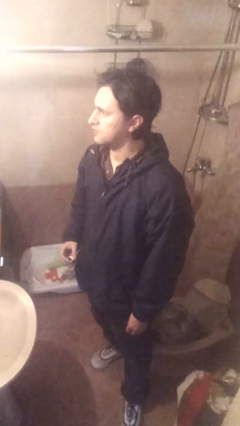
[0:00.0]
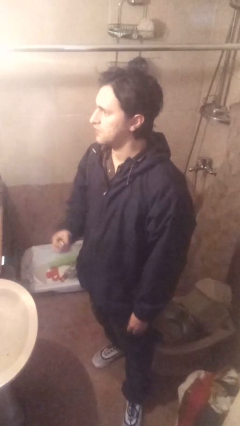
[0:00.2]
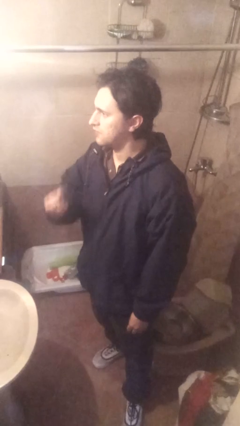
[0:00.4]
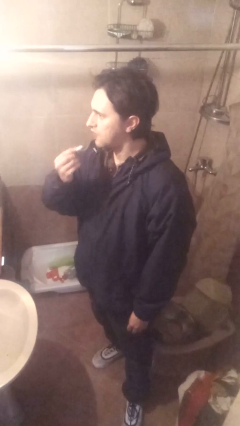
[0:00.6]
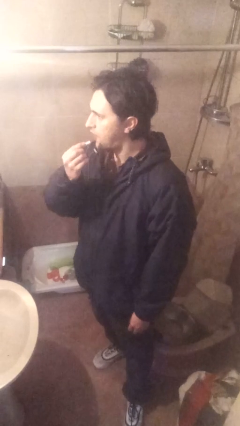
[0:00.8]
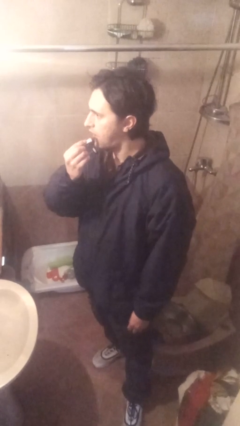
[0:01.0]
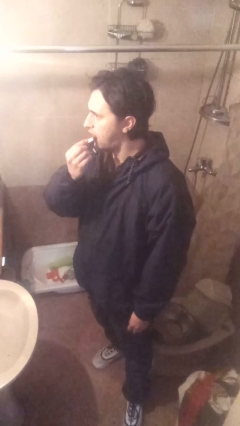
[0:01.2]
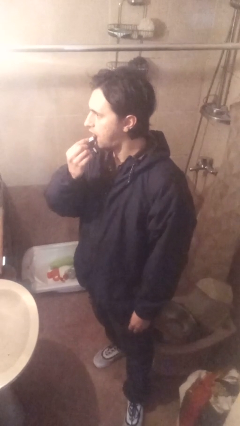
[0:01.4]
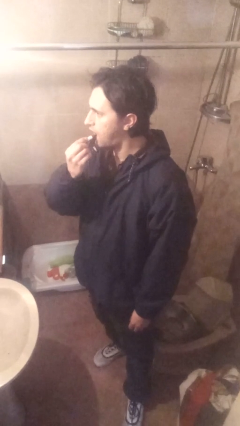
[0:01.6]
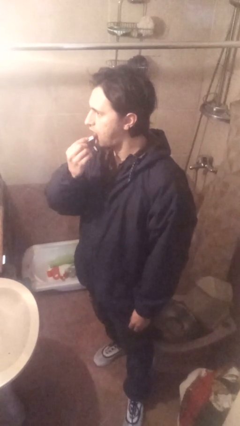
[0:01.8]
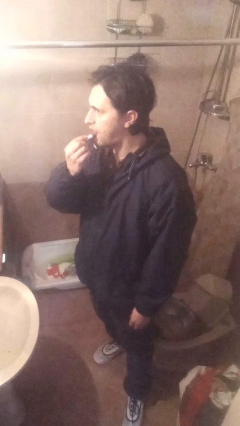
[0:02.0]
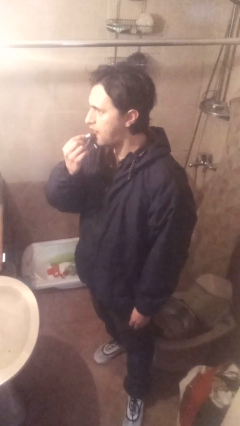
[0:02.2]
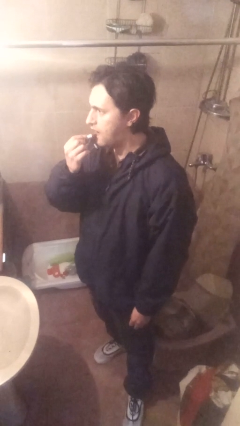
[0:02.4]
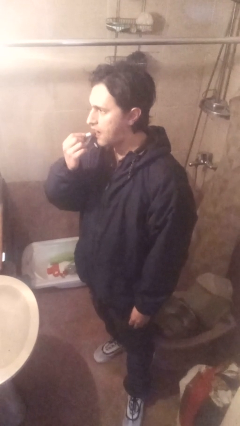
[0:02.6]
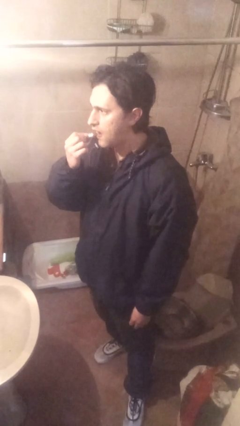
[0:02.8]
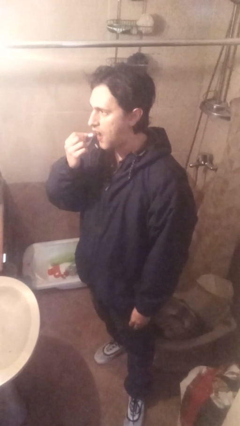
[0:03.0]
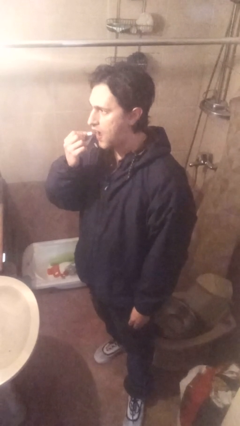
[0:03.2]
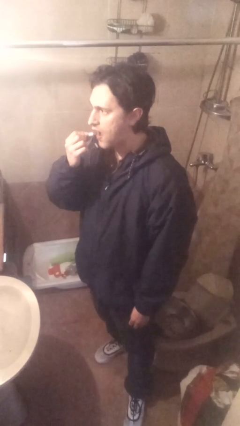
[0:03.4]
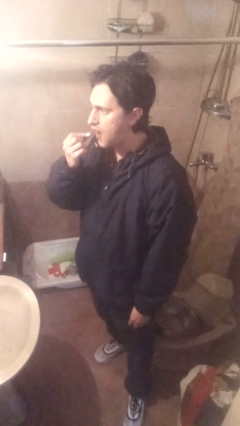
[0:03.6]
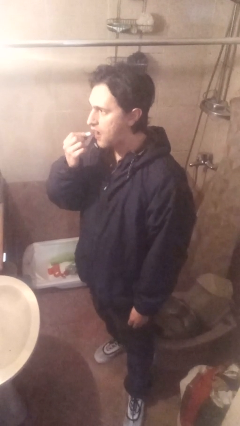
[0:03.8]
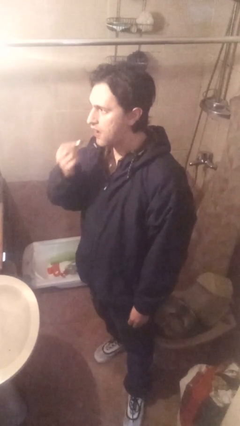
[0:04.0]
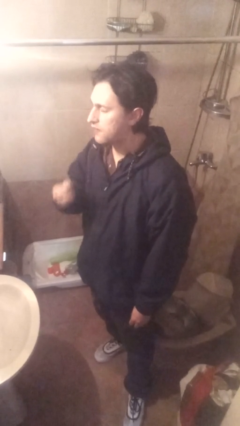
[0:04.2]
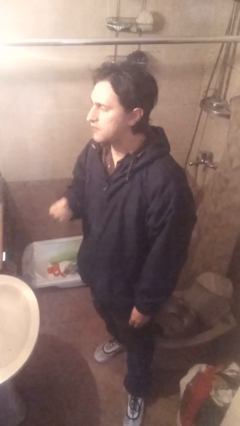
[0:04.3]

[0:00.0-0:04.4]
person applies lip makeup

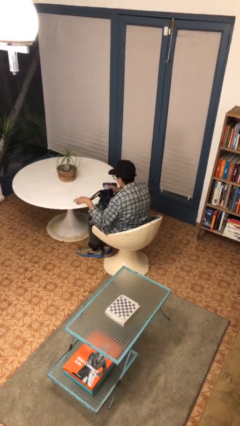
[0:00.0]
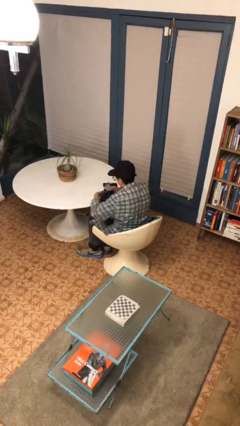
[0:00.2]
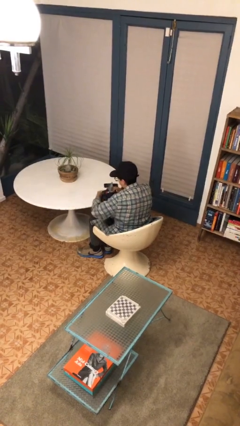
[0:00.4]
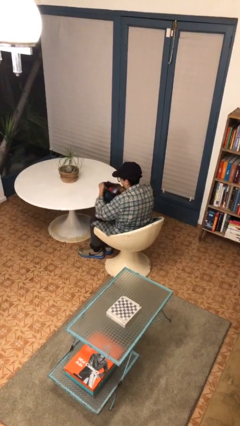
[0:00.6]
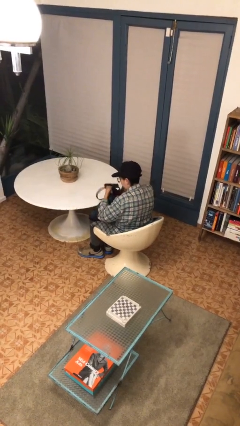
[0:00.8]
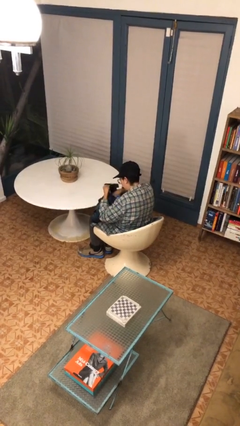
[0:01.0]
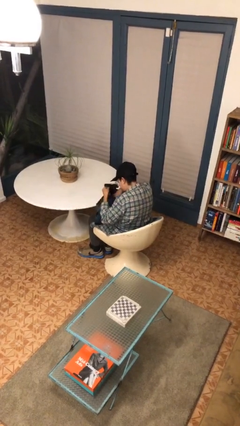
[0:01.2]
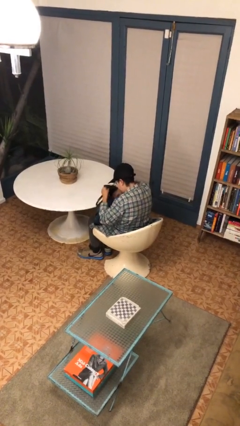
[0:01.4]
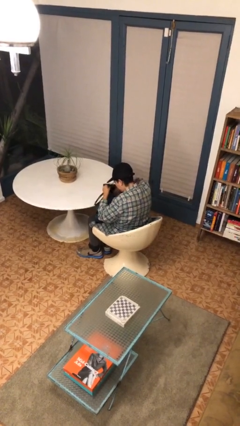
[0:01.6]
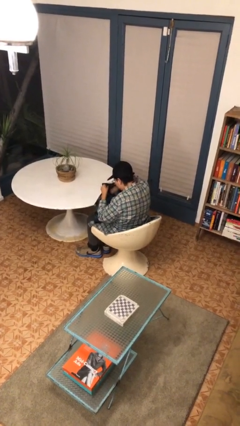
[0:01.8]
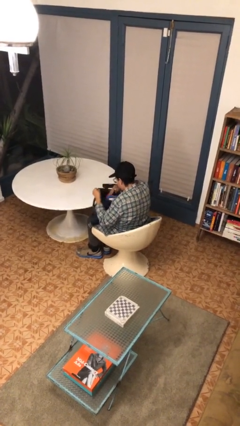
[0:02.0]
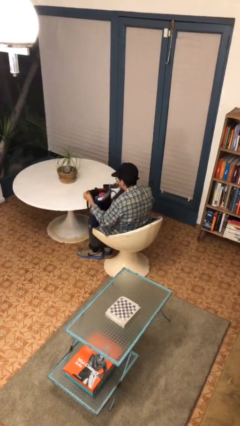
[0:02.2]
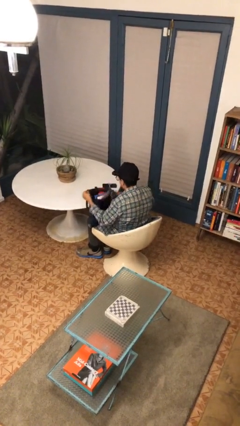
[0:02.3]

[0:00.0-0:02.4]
person searches in bag

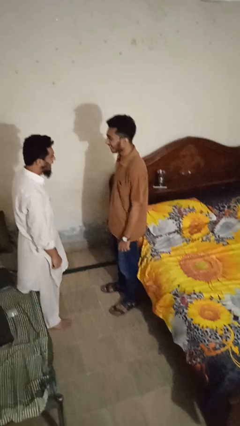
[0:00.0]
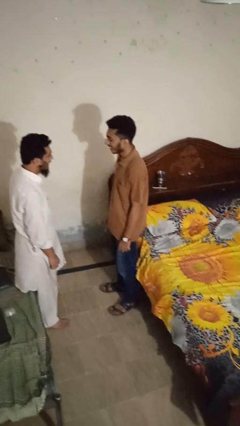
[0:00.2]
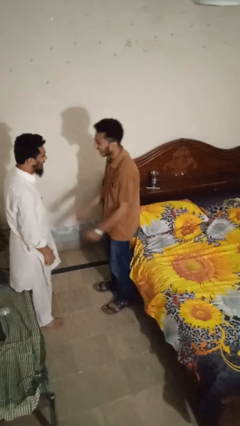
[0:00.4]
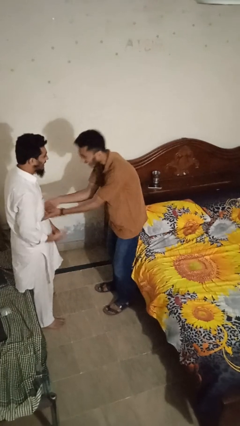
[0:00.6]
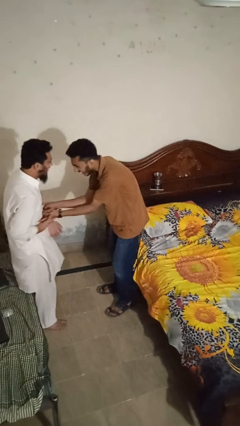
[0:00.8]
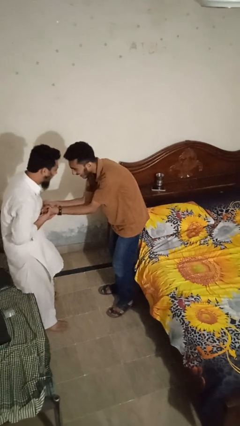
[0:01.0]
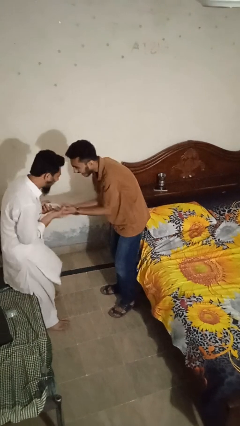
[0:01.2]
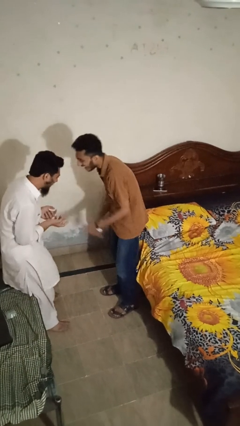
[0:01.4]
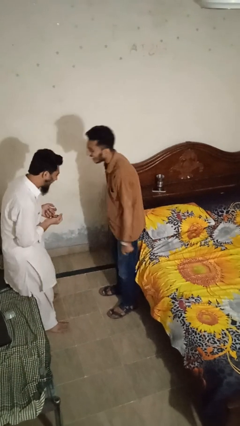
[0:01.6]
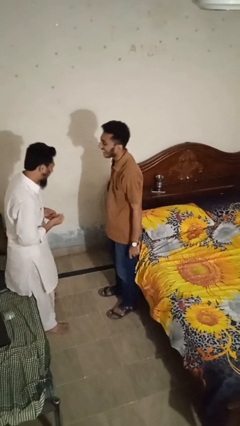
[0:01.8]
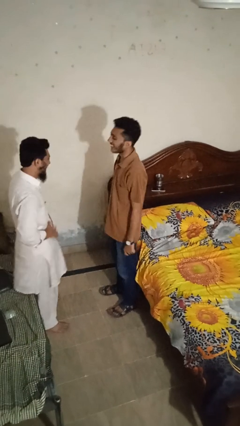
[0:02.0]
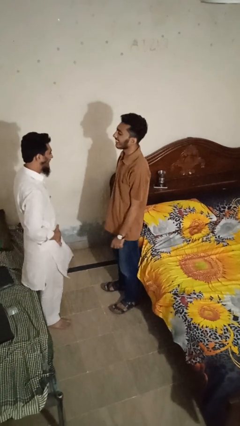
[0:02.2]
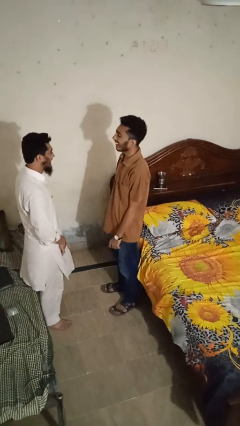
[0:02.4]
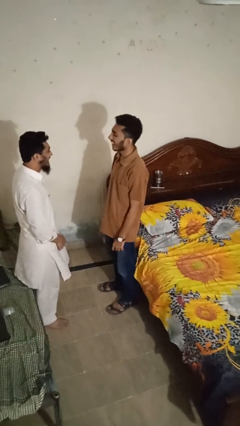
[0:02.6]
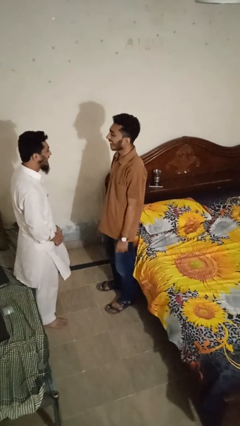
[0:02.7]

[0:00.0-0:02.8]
person tickles person

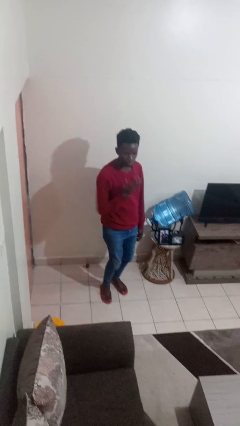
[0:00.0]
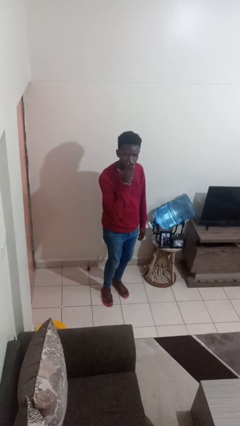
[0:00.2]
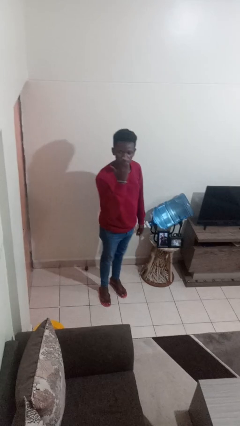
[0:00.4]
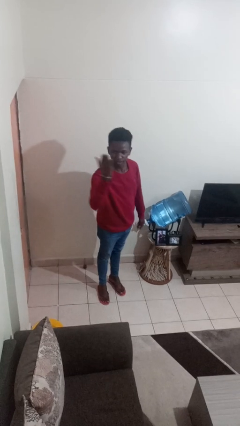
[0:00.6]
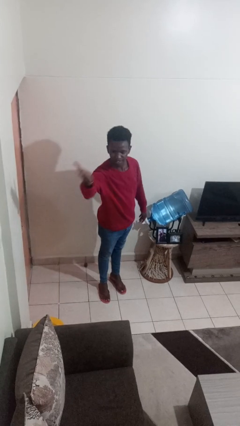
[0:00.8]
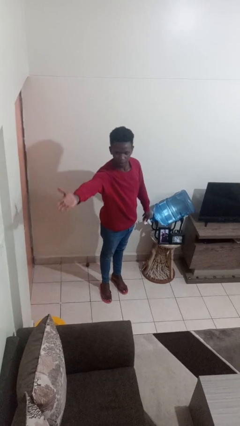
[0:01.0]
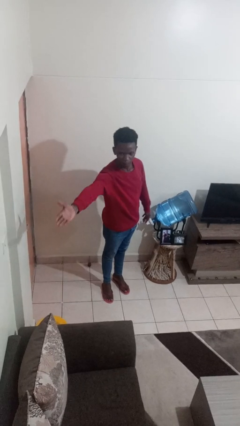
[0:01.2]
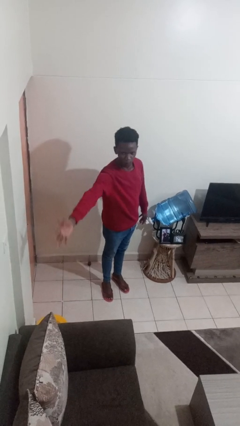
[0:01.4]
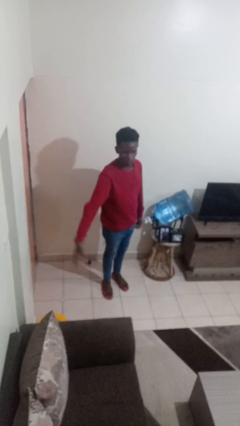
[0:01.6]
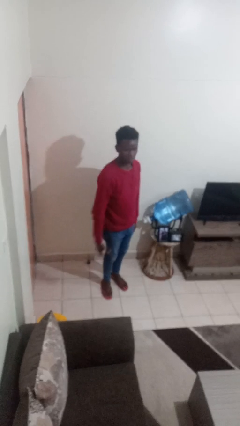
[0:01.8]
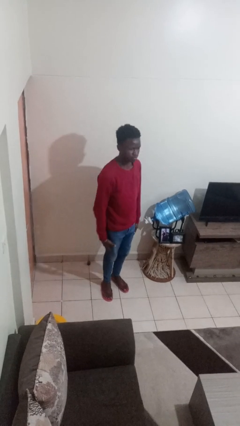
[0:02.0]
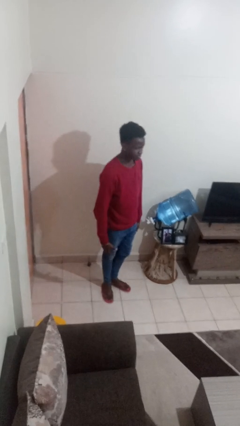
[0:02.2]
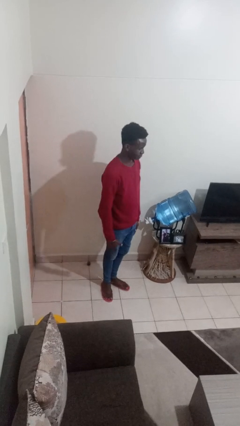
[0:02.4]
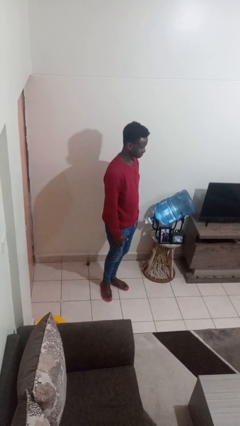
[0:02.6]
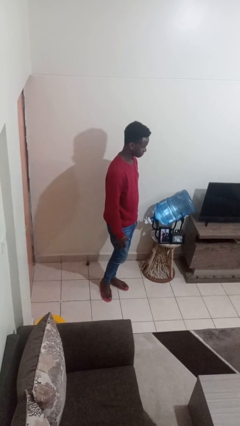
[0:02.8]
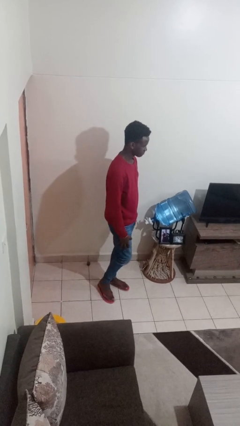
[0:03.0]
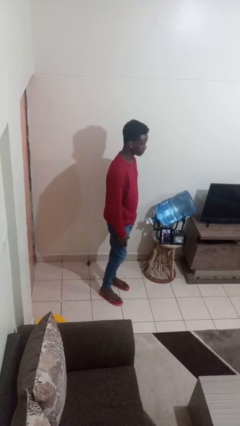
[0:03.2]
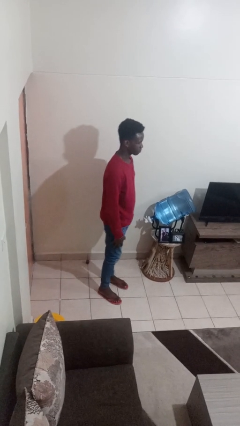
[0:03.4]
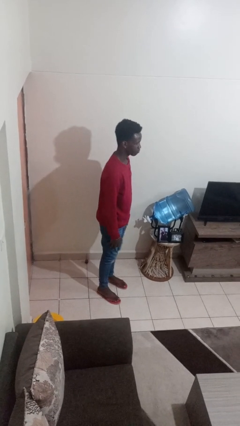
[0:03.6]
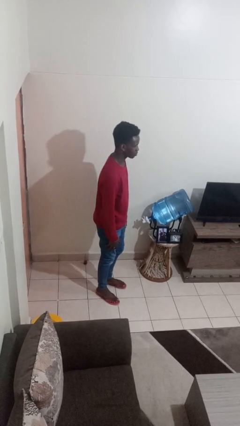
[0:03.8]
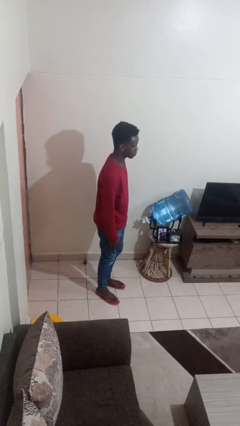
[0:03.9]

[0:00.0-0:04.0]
person gestures blow kiss

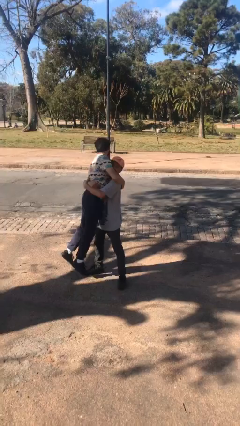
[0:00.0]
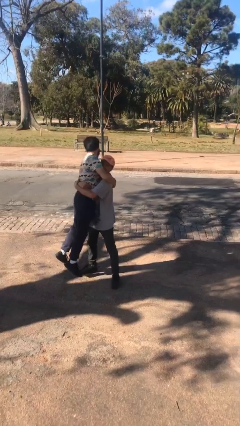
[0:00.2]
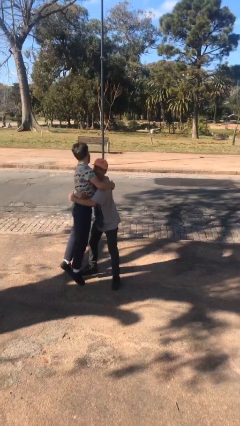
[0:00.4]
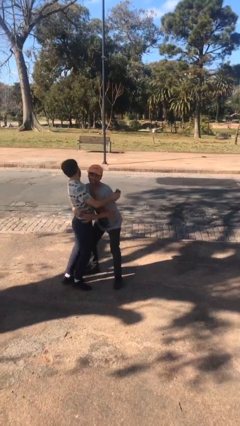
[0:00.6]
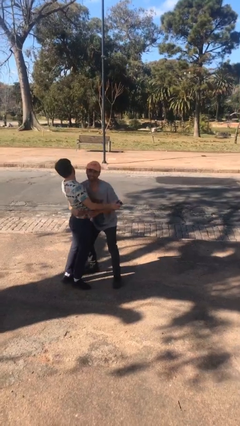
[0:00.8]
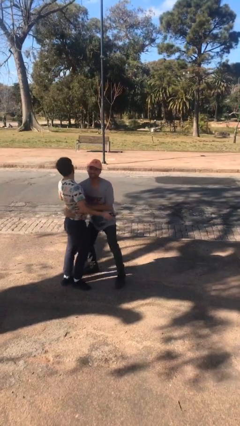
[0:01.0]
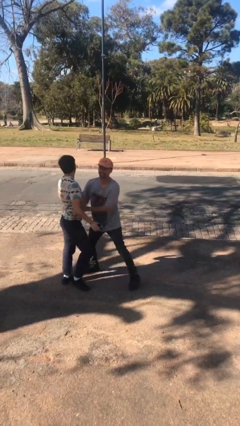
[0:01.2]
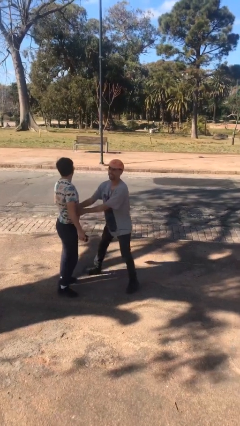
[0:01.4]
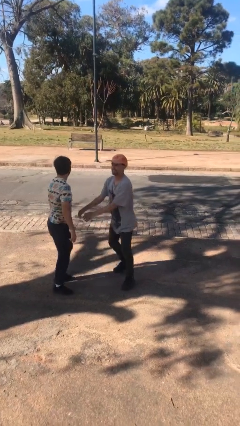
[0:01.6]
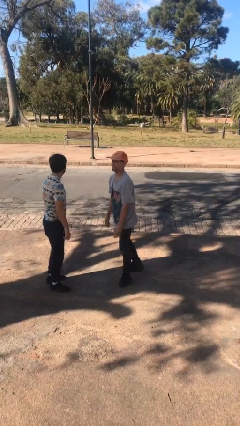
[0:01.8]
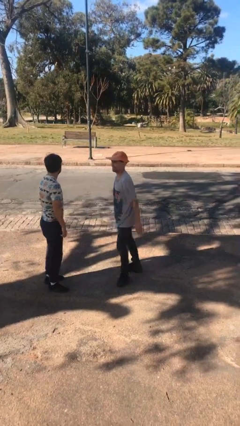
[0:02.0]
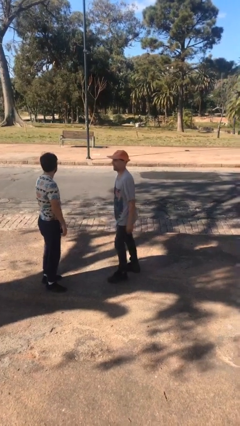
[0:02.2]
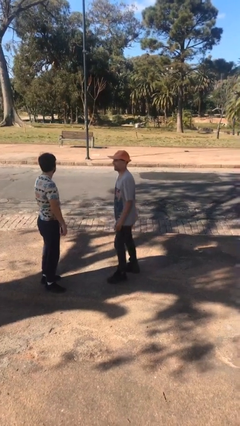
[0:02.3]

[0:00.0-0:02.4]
person puts down person

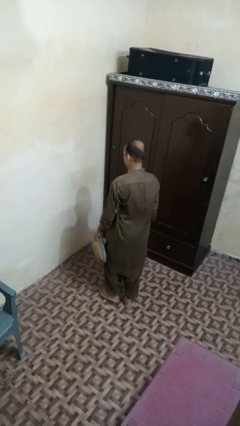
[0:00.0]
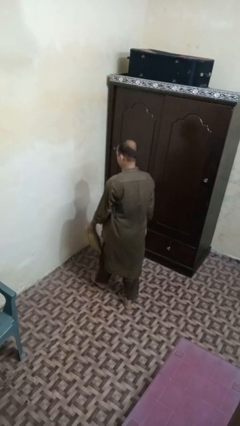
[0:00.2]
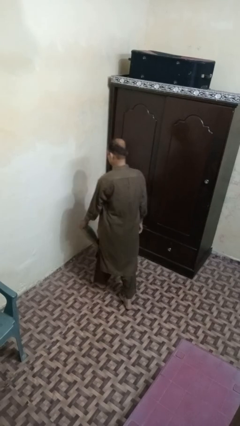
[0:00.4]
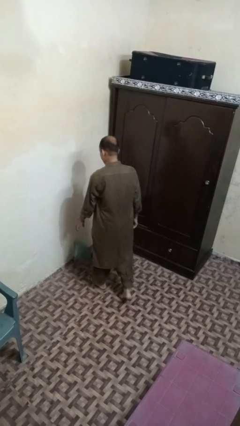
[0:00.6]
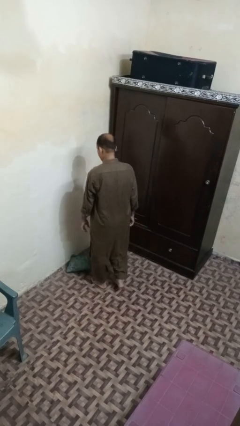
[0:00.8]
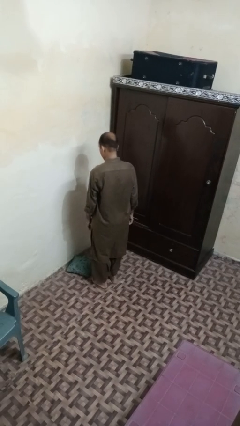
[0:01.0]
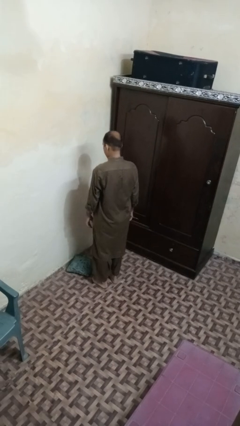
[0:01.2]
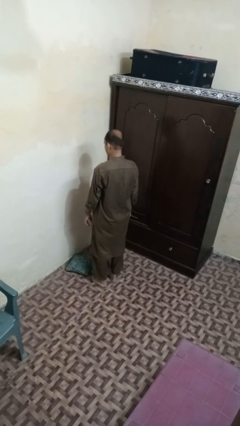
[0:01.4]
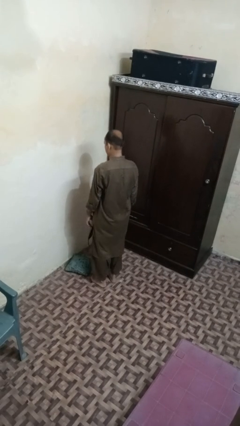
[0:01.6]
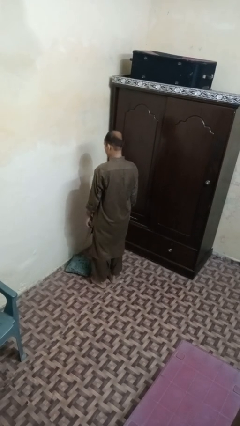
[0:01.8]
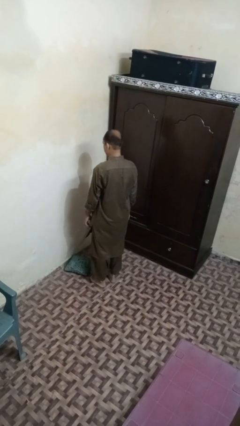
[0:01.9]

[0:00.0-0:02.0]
person throws object to ground
